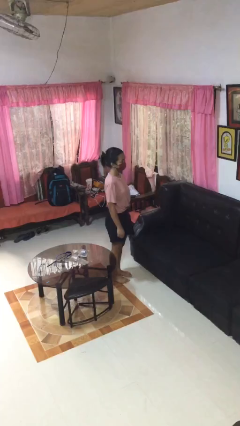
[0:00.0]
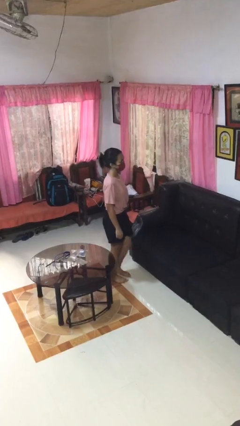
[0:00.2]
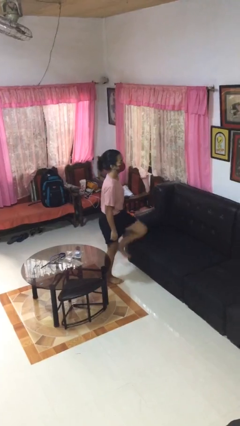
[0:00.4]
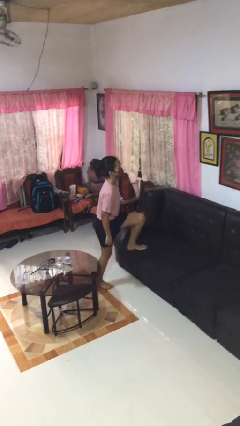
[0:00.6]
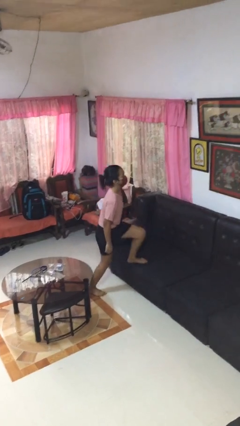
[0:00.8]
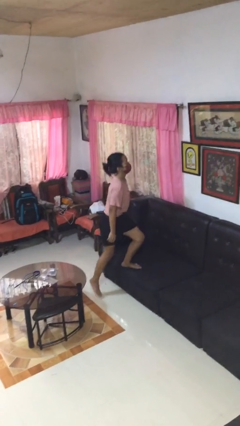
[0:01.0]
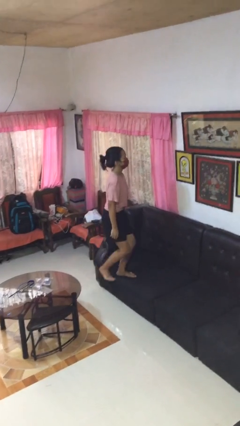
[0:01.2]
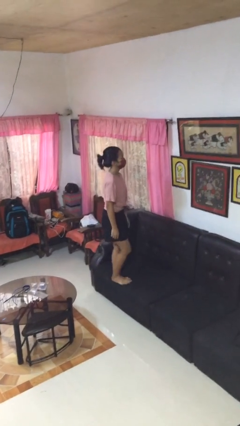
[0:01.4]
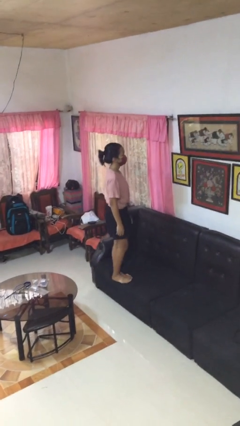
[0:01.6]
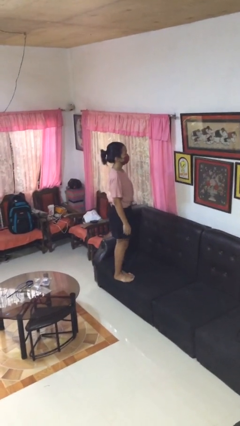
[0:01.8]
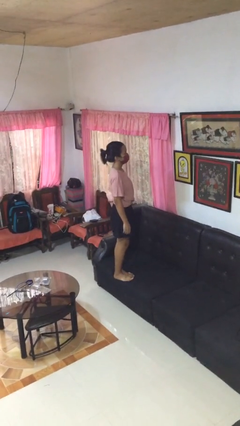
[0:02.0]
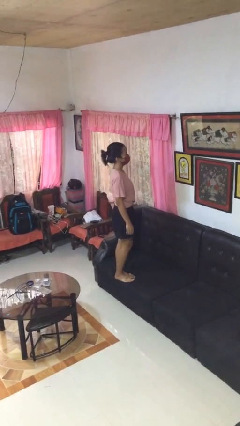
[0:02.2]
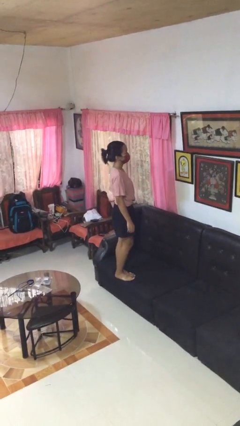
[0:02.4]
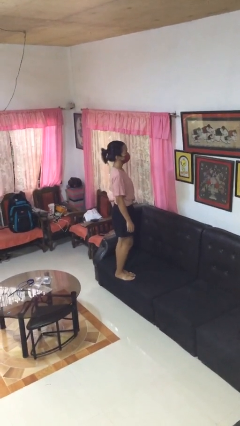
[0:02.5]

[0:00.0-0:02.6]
person climbs on couch

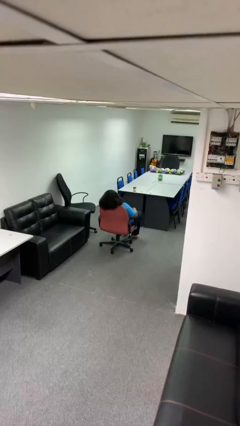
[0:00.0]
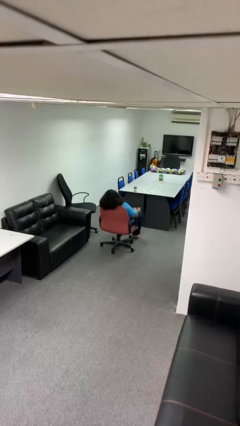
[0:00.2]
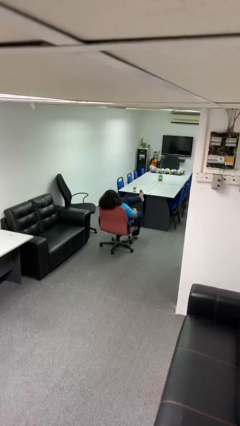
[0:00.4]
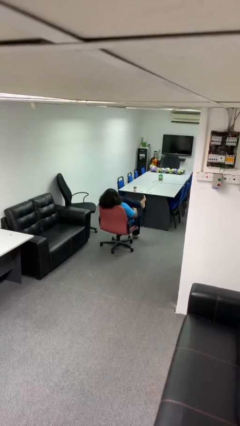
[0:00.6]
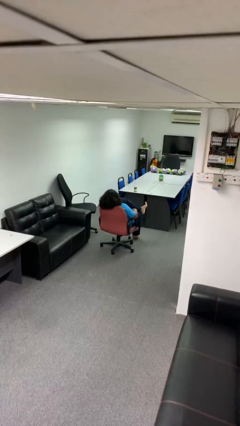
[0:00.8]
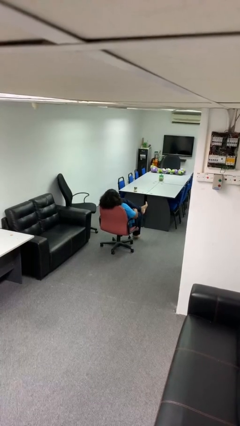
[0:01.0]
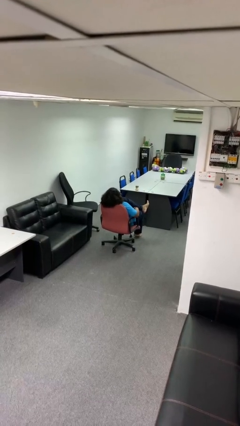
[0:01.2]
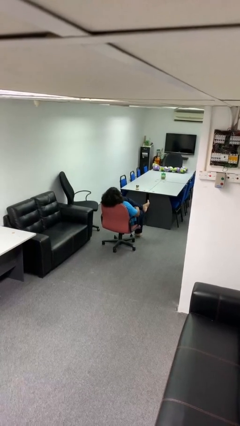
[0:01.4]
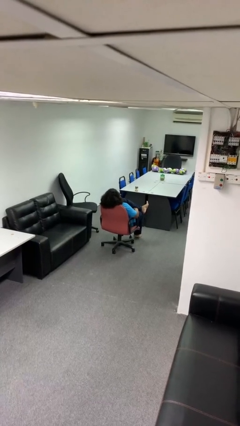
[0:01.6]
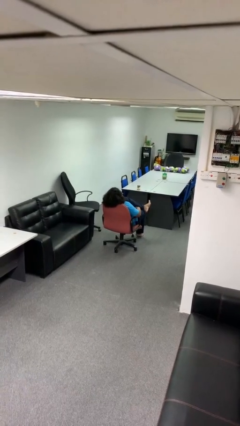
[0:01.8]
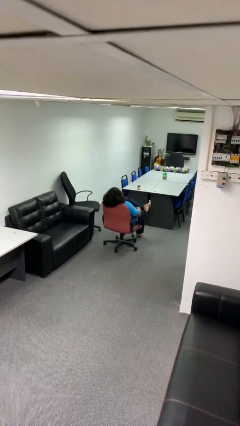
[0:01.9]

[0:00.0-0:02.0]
person crosses legs

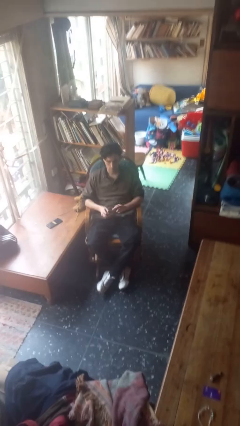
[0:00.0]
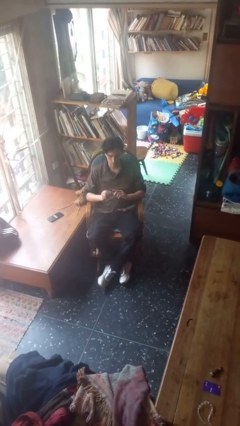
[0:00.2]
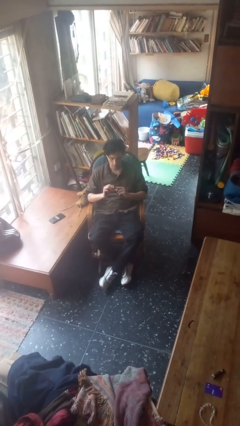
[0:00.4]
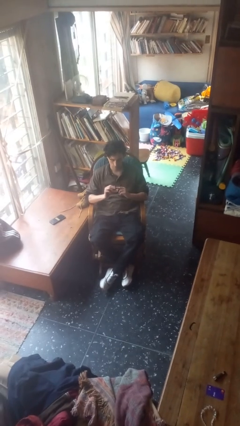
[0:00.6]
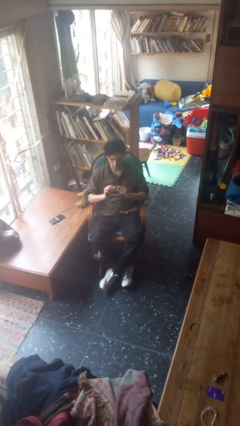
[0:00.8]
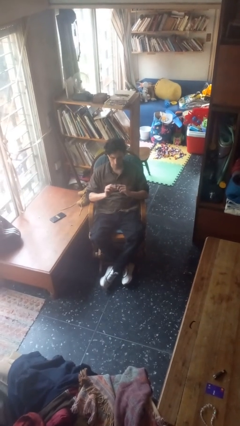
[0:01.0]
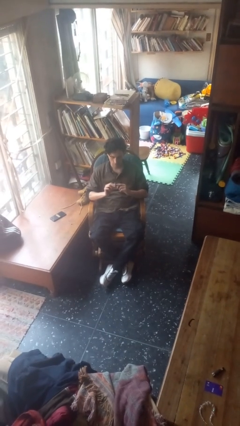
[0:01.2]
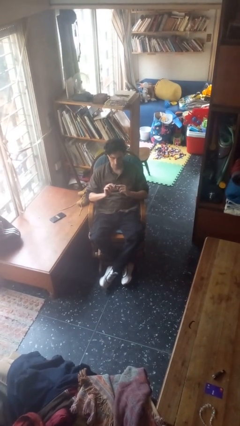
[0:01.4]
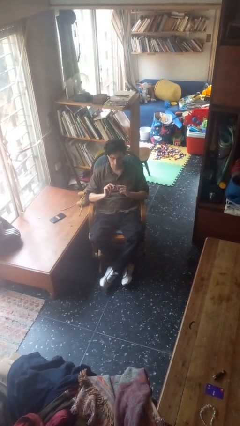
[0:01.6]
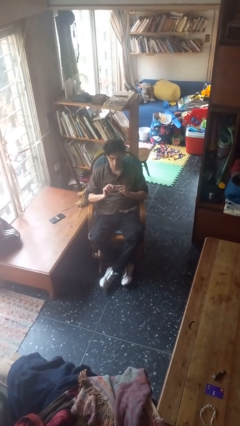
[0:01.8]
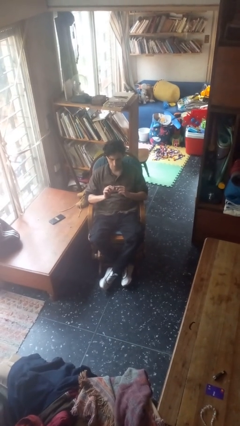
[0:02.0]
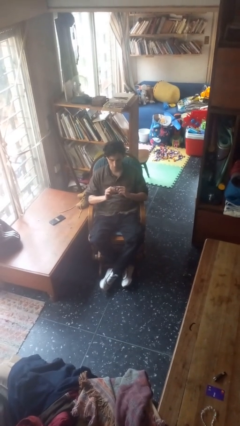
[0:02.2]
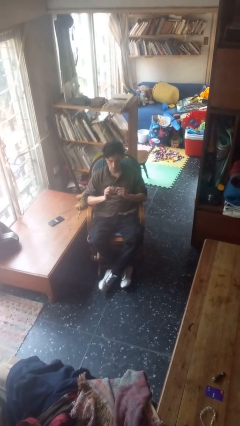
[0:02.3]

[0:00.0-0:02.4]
person files fingernails

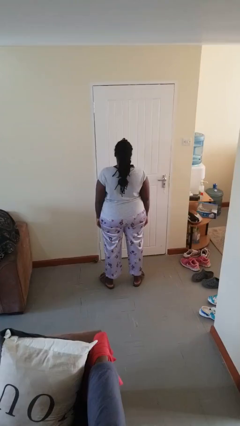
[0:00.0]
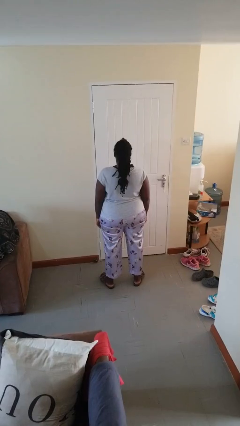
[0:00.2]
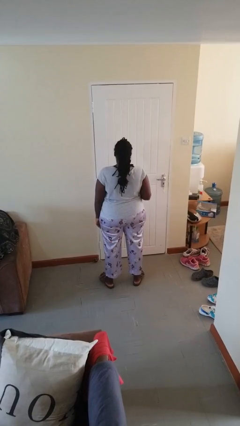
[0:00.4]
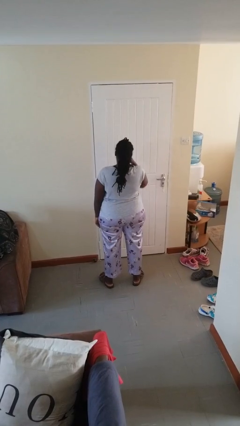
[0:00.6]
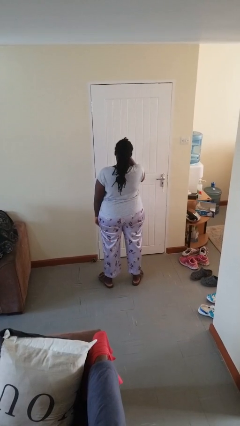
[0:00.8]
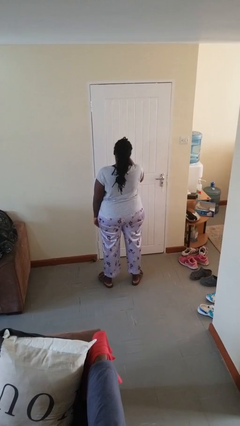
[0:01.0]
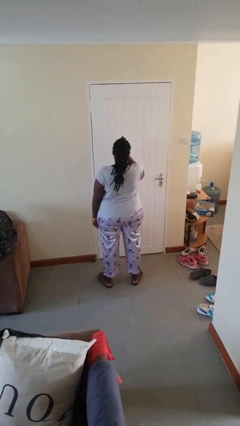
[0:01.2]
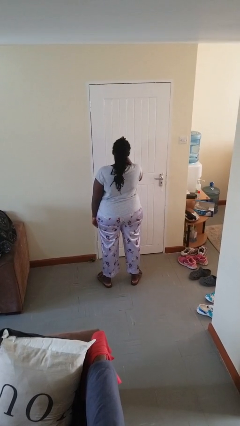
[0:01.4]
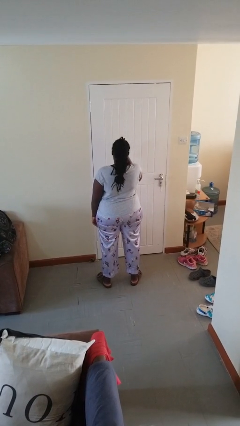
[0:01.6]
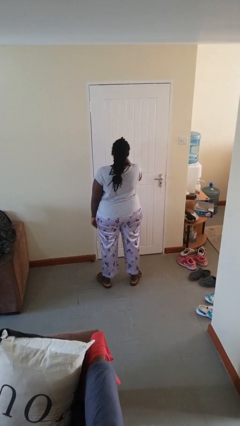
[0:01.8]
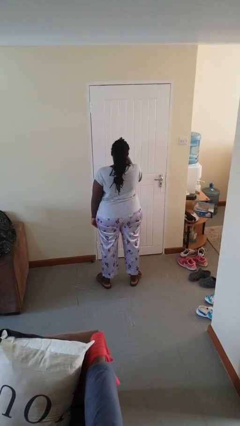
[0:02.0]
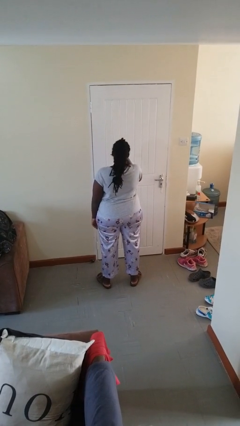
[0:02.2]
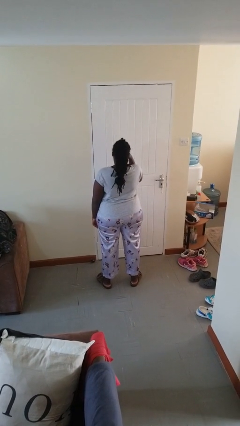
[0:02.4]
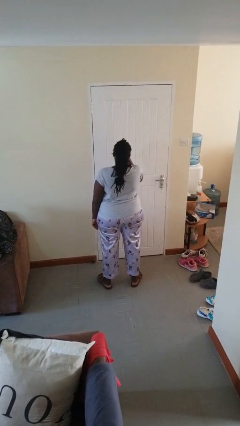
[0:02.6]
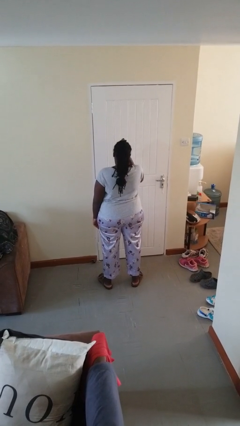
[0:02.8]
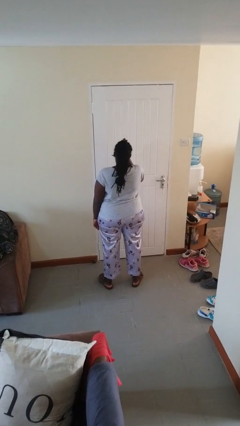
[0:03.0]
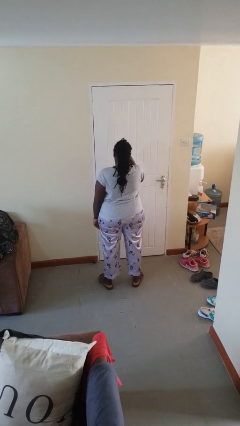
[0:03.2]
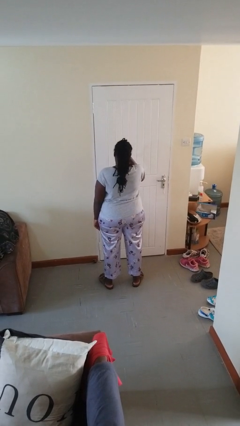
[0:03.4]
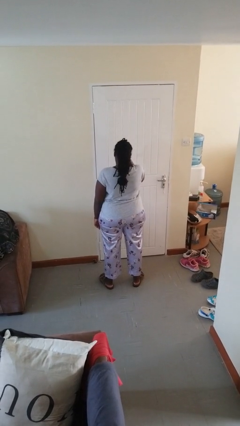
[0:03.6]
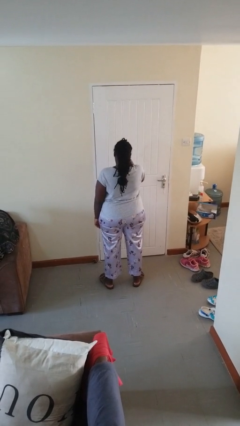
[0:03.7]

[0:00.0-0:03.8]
person scratches face

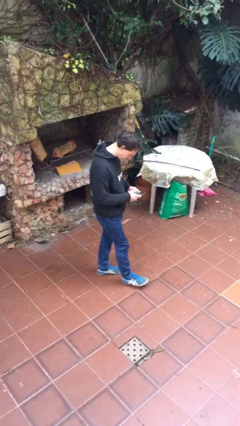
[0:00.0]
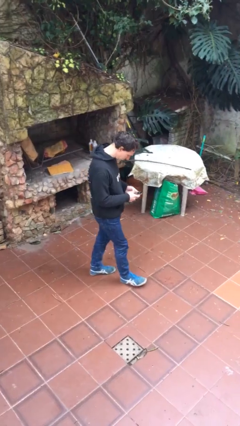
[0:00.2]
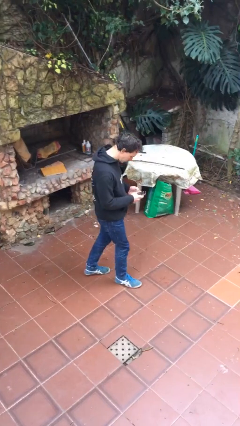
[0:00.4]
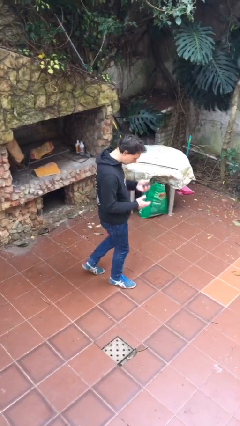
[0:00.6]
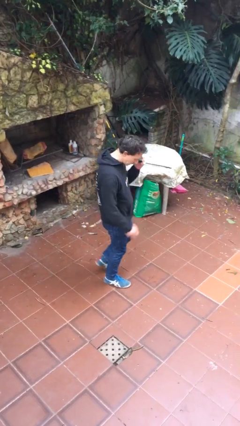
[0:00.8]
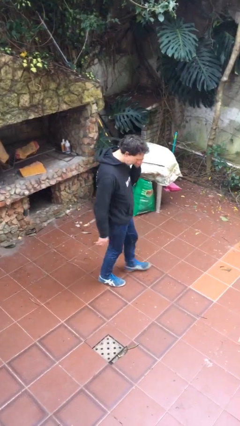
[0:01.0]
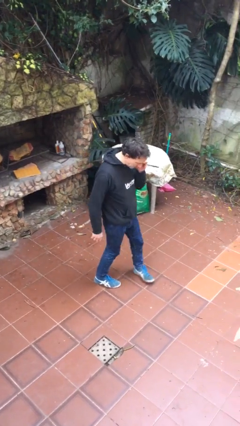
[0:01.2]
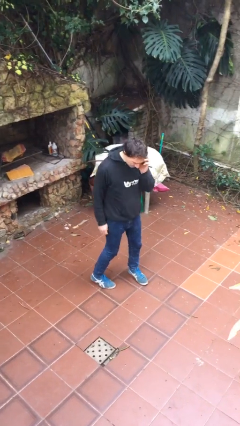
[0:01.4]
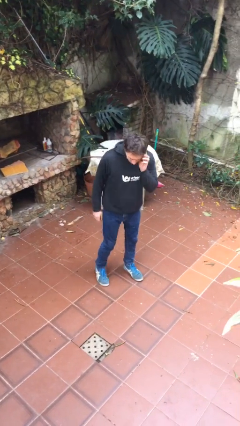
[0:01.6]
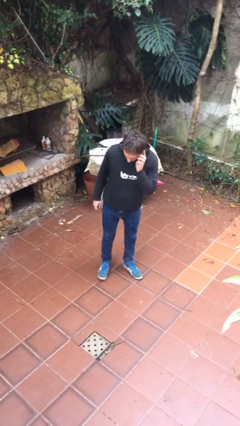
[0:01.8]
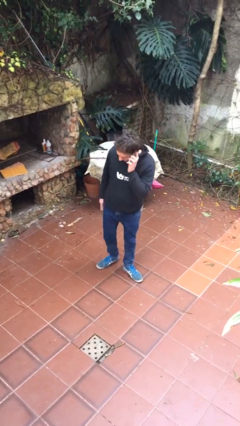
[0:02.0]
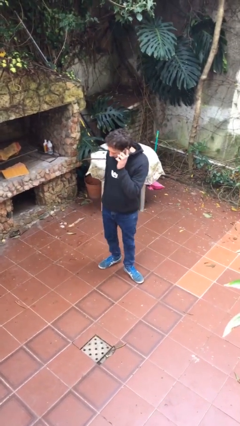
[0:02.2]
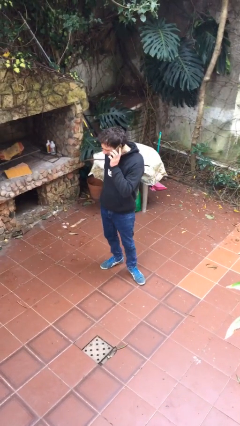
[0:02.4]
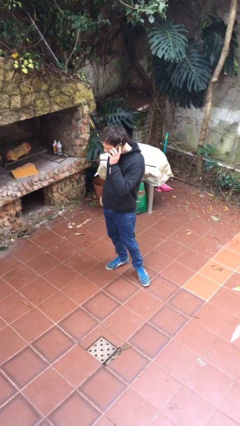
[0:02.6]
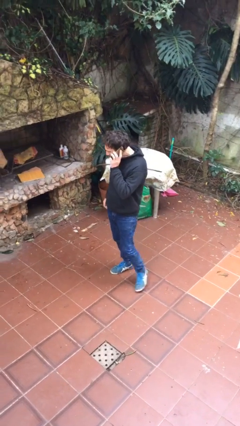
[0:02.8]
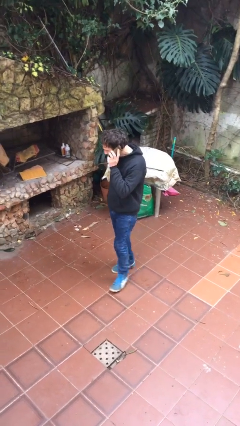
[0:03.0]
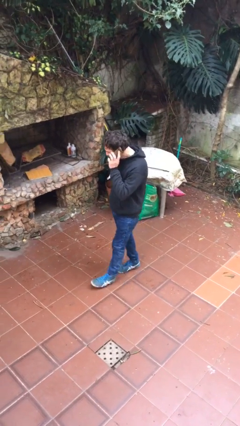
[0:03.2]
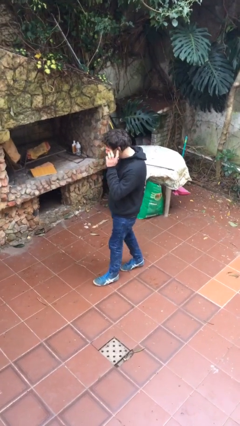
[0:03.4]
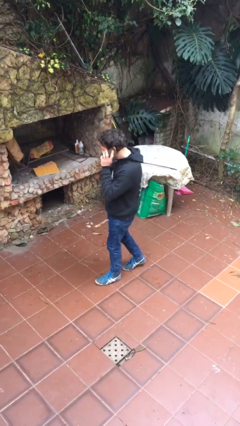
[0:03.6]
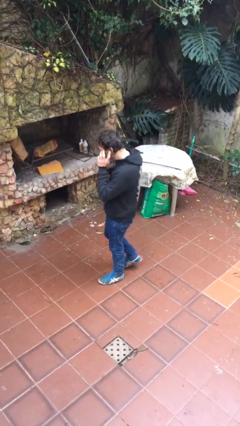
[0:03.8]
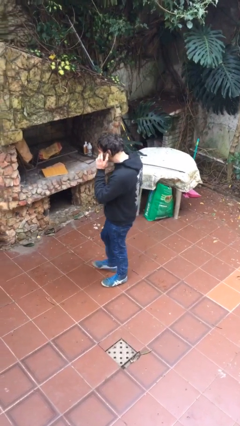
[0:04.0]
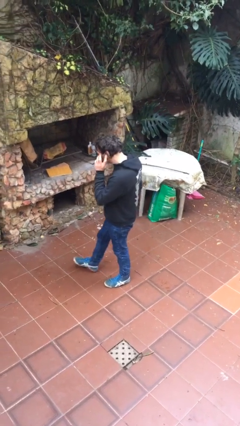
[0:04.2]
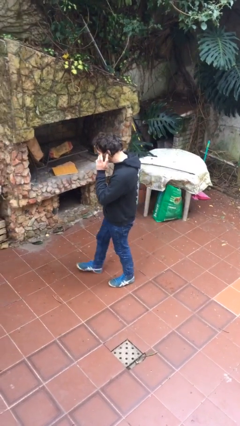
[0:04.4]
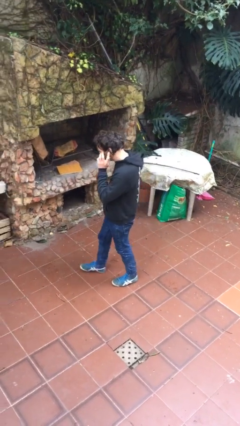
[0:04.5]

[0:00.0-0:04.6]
person talks on phone

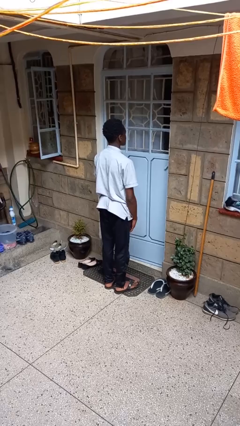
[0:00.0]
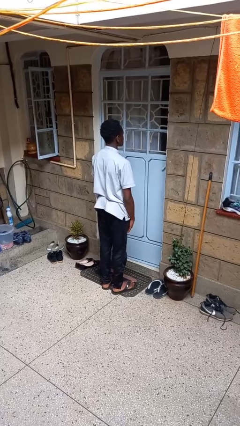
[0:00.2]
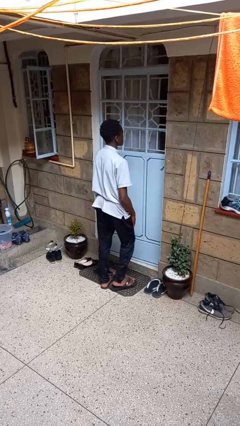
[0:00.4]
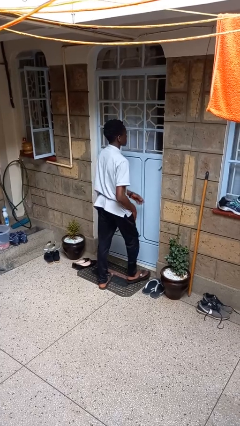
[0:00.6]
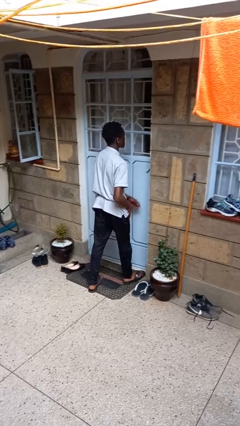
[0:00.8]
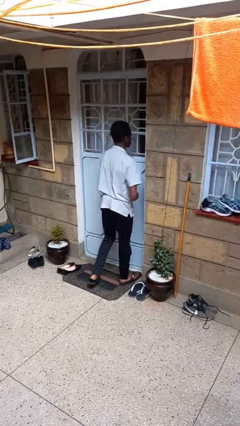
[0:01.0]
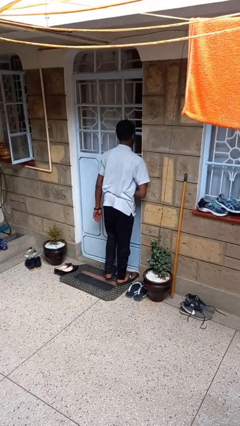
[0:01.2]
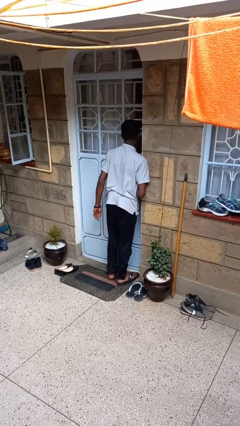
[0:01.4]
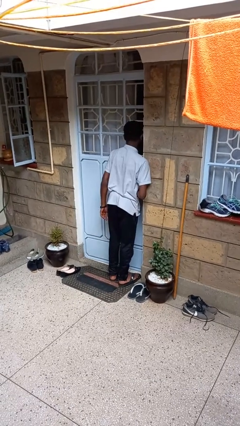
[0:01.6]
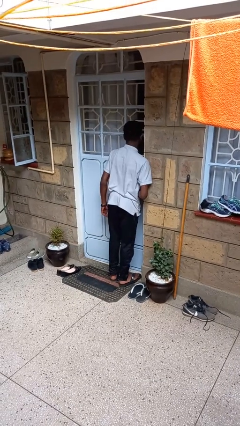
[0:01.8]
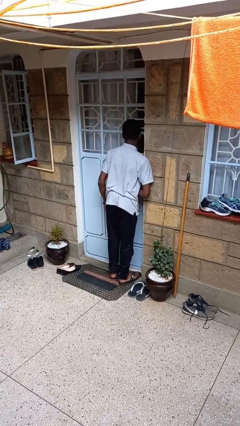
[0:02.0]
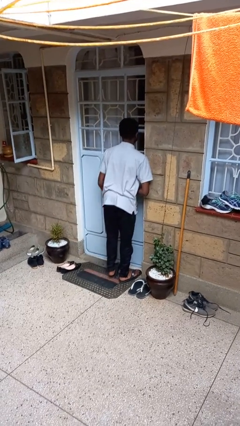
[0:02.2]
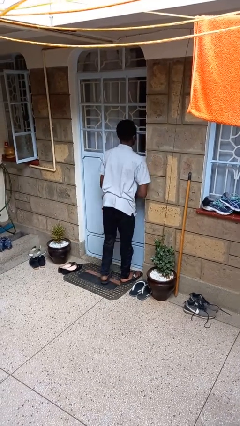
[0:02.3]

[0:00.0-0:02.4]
person bumps into wall
